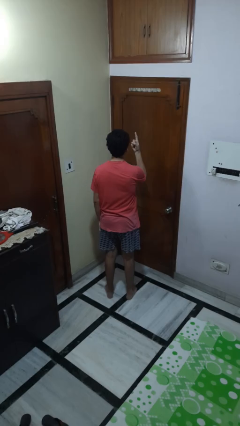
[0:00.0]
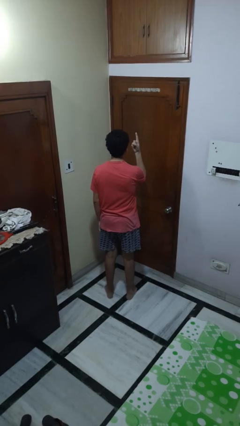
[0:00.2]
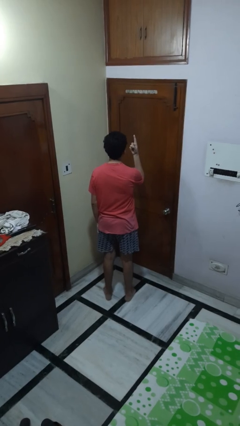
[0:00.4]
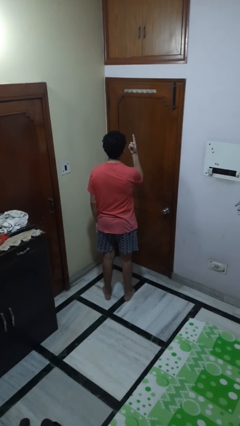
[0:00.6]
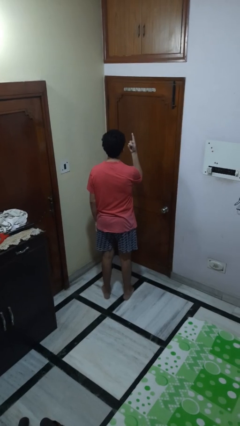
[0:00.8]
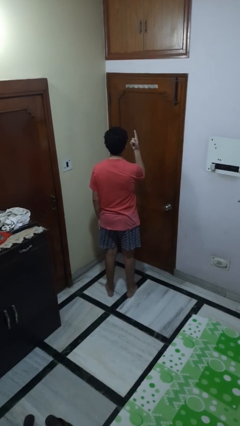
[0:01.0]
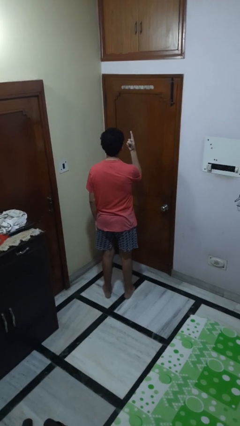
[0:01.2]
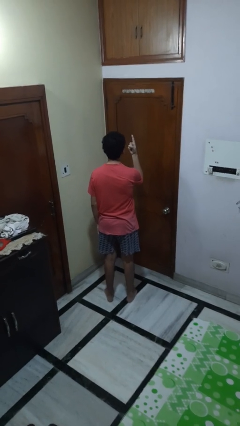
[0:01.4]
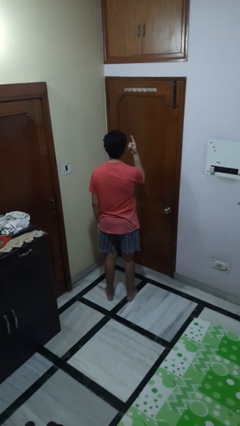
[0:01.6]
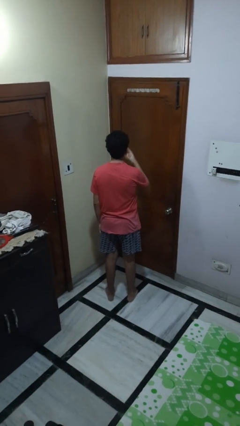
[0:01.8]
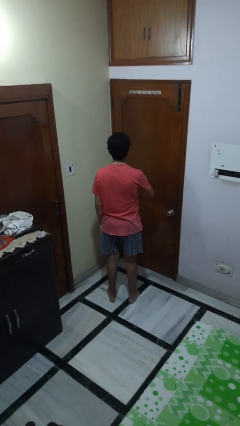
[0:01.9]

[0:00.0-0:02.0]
person gestures number one

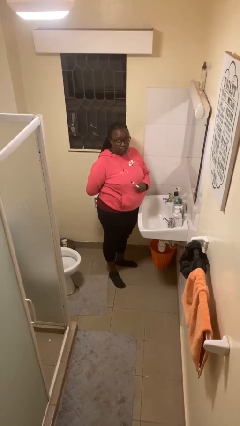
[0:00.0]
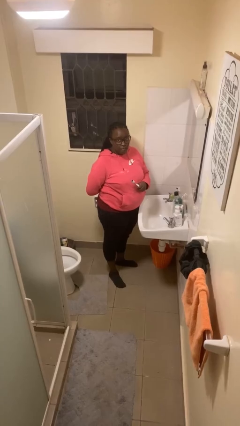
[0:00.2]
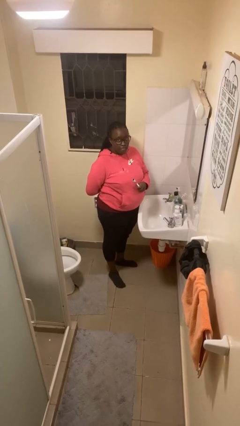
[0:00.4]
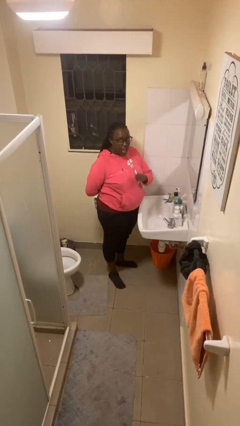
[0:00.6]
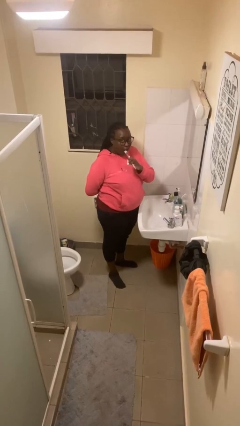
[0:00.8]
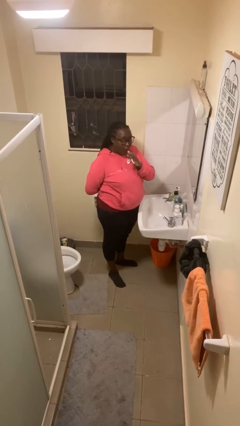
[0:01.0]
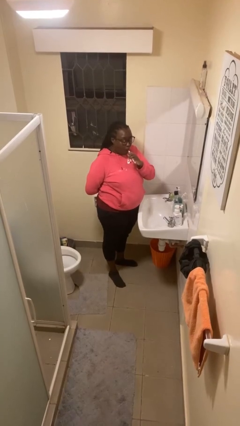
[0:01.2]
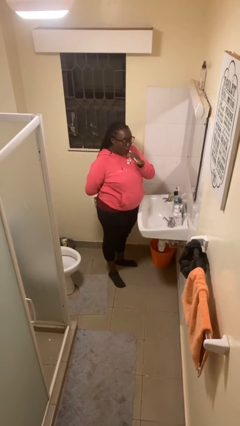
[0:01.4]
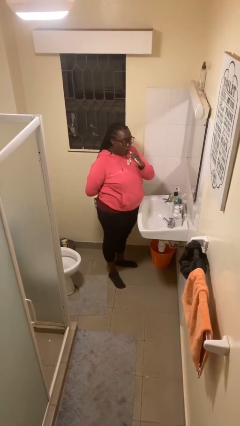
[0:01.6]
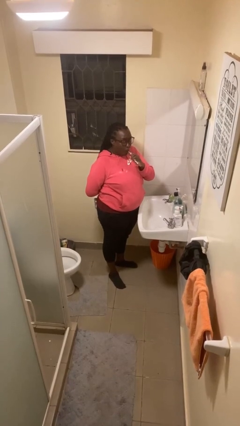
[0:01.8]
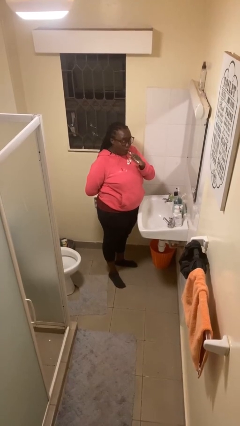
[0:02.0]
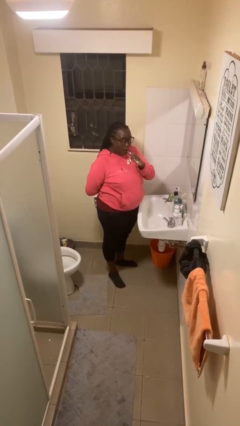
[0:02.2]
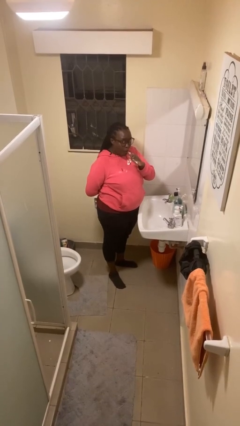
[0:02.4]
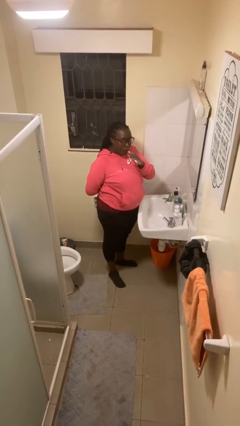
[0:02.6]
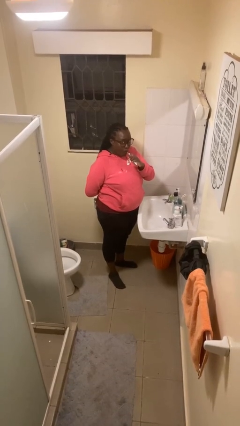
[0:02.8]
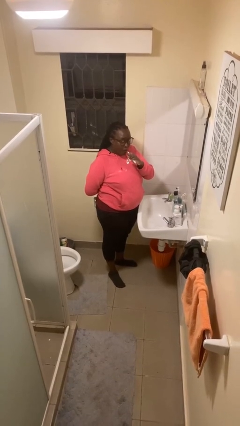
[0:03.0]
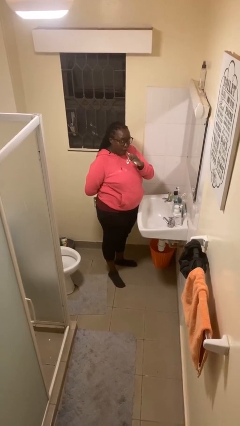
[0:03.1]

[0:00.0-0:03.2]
person brushes teeth

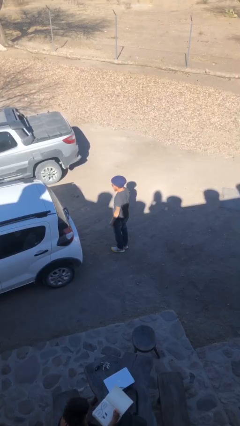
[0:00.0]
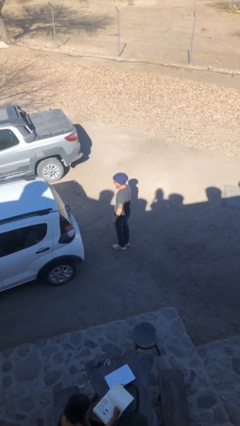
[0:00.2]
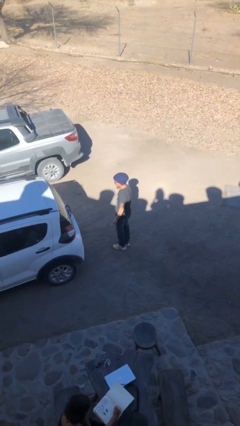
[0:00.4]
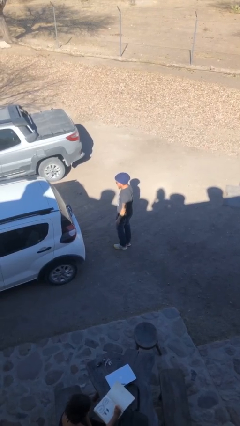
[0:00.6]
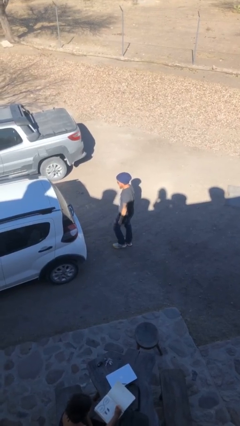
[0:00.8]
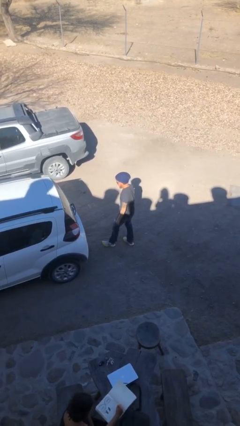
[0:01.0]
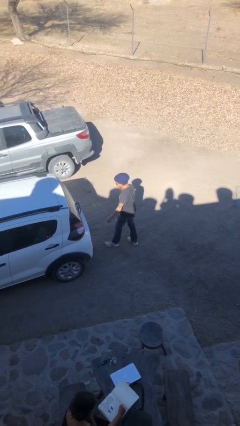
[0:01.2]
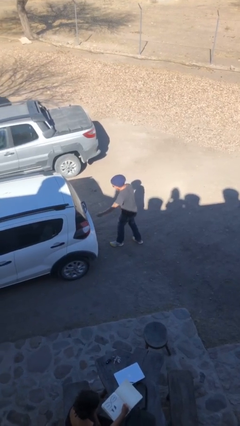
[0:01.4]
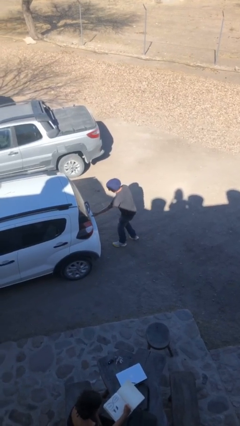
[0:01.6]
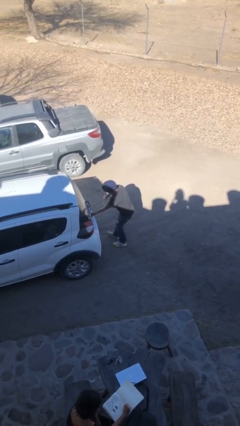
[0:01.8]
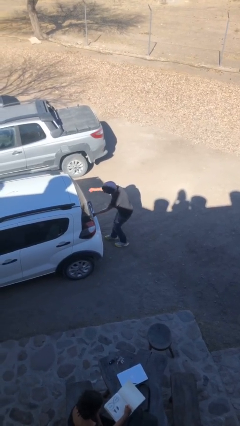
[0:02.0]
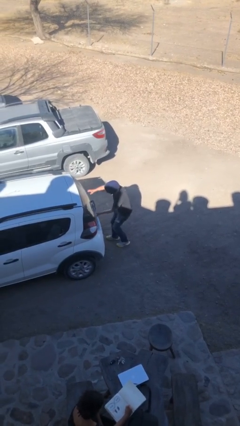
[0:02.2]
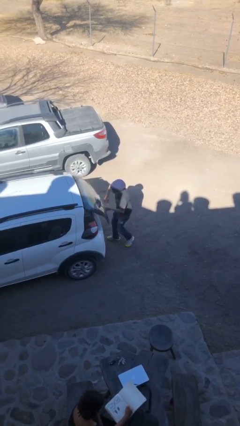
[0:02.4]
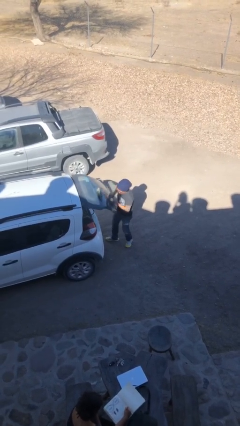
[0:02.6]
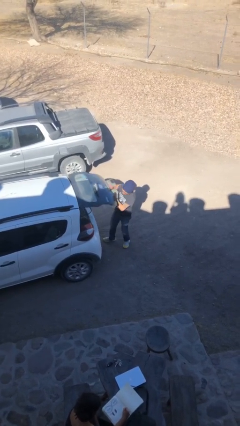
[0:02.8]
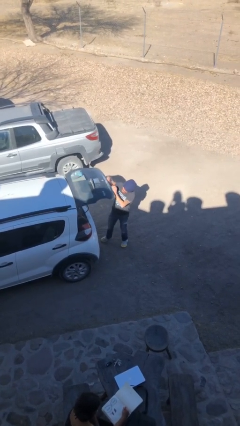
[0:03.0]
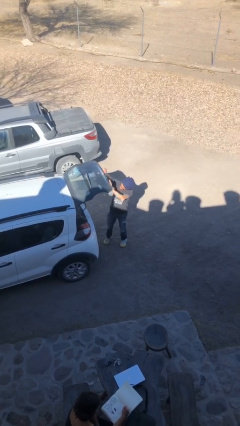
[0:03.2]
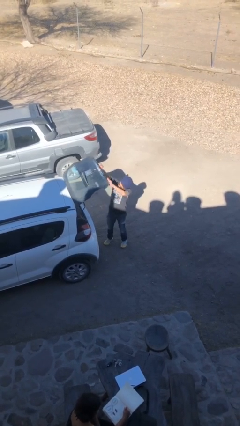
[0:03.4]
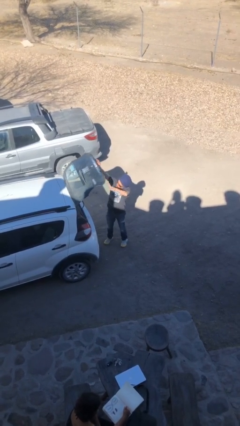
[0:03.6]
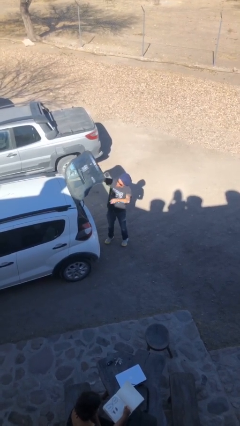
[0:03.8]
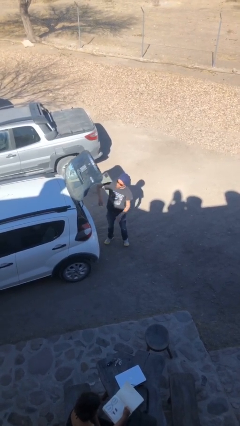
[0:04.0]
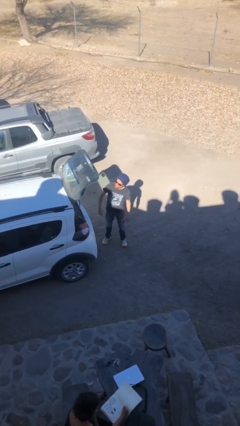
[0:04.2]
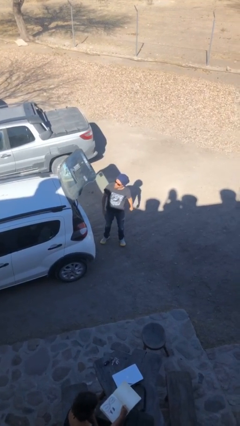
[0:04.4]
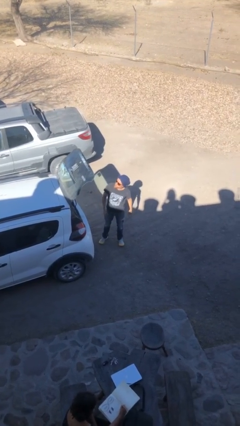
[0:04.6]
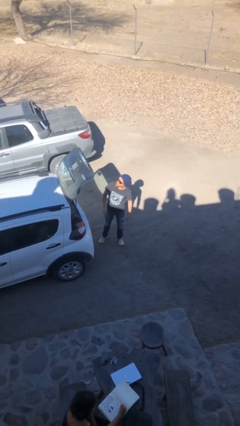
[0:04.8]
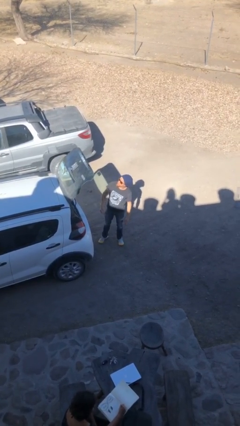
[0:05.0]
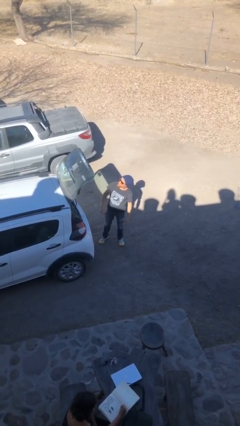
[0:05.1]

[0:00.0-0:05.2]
person opens car trunk

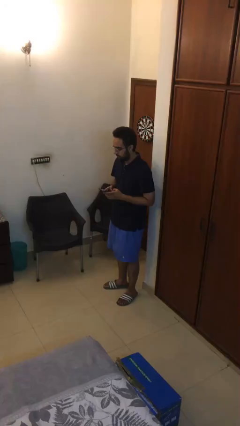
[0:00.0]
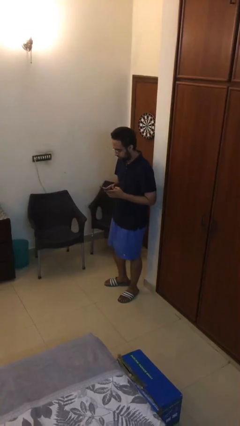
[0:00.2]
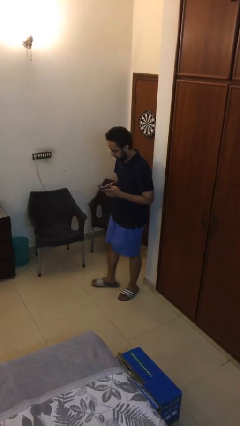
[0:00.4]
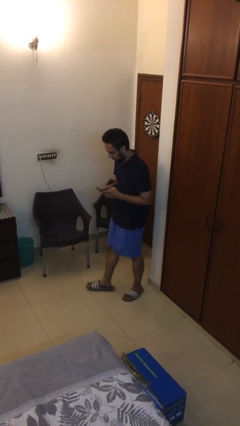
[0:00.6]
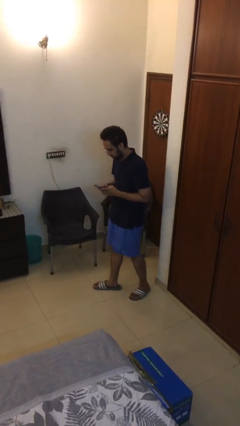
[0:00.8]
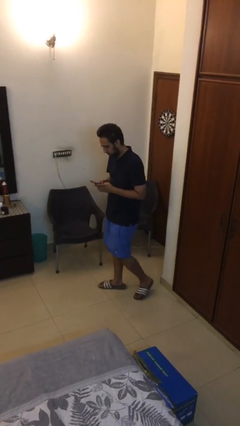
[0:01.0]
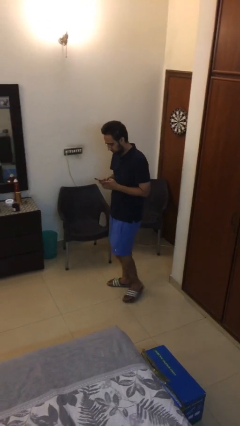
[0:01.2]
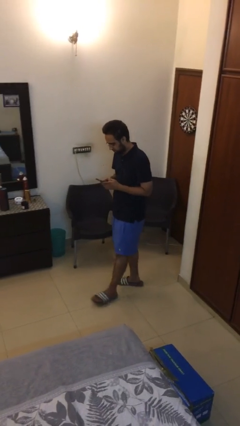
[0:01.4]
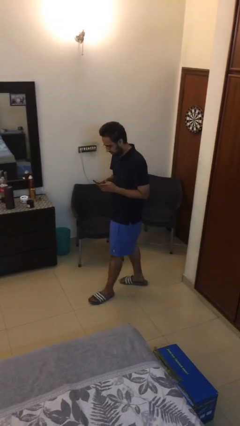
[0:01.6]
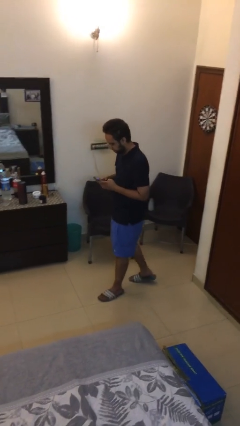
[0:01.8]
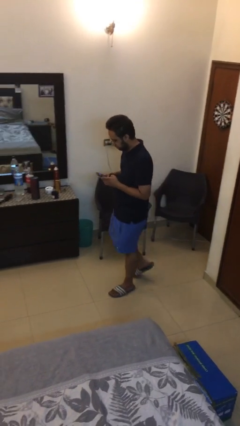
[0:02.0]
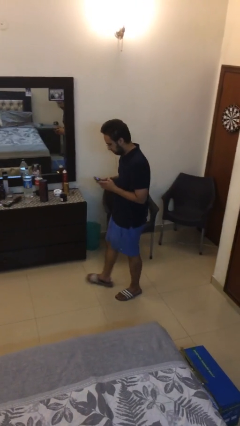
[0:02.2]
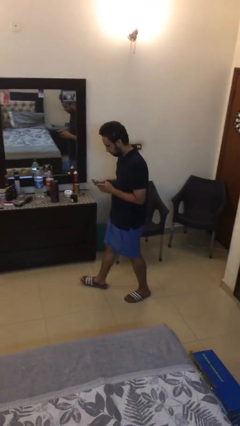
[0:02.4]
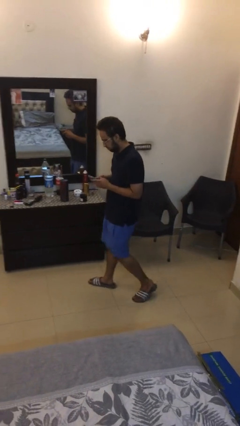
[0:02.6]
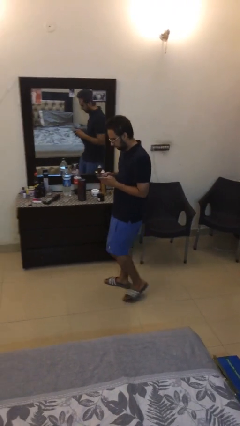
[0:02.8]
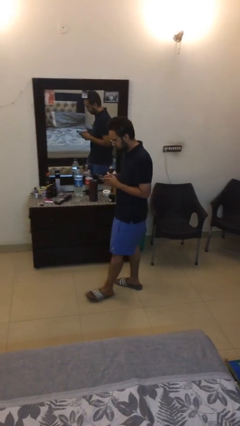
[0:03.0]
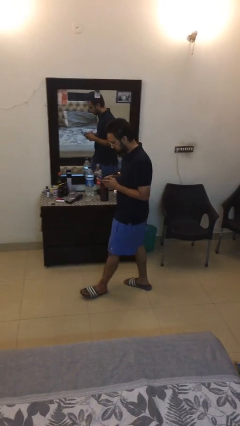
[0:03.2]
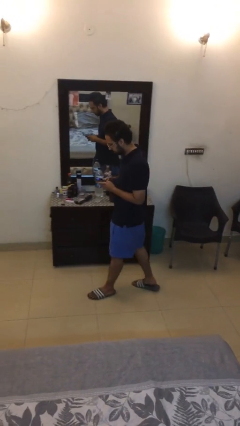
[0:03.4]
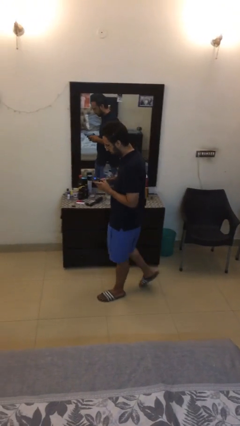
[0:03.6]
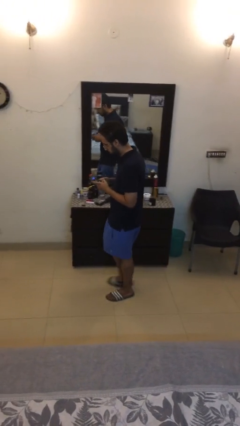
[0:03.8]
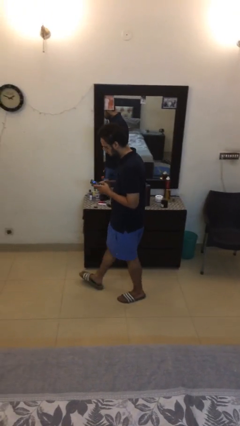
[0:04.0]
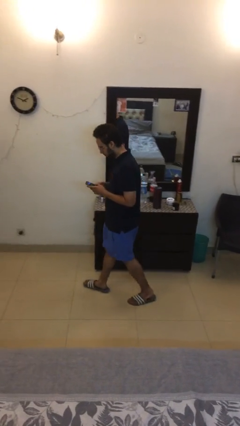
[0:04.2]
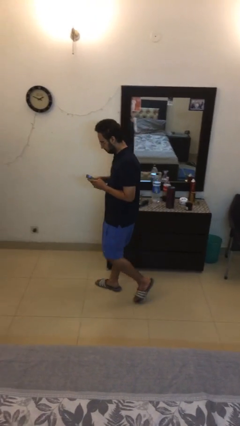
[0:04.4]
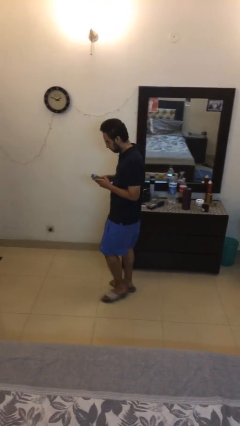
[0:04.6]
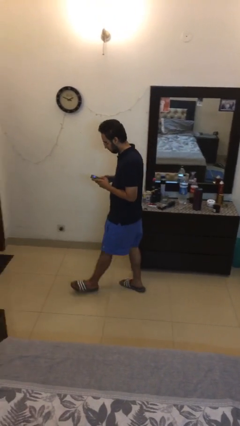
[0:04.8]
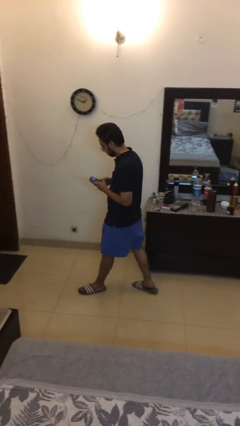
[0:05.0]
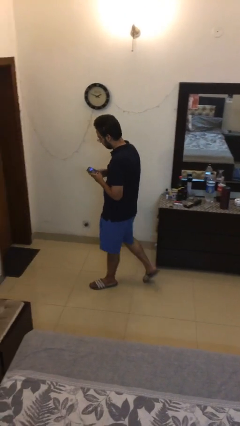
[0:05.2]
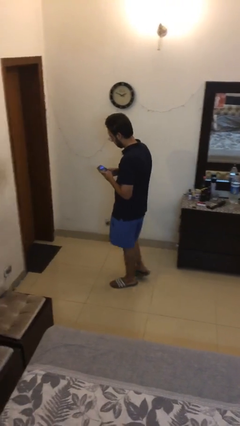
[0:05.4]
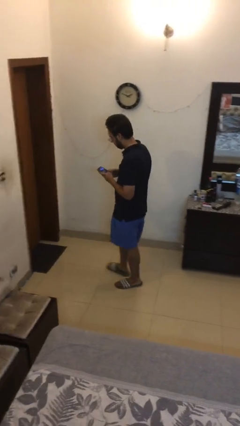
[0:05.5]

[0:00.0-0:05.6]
person texts on phone

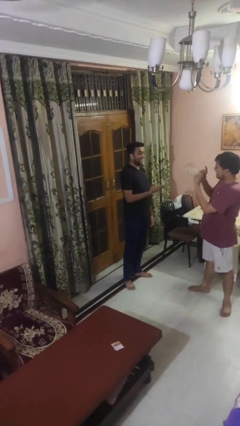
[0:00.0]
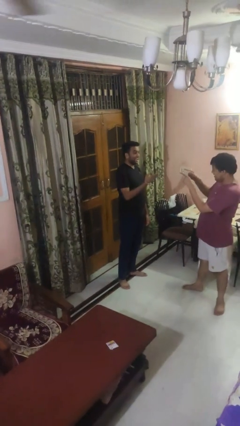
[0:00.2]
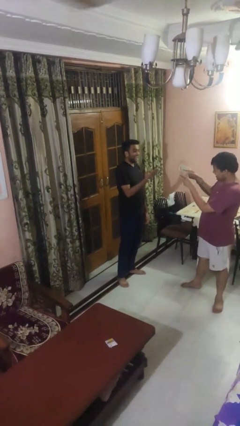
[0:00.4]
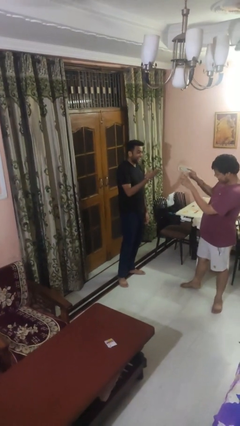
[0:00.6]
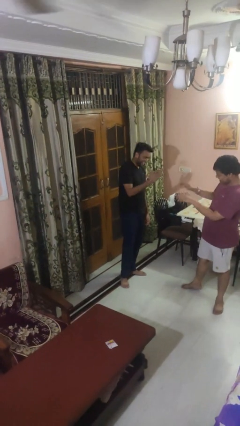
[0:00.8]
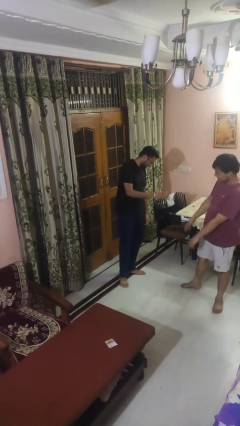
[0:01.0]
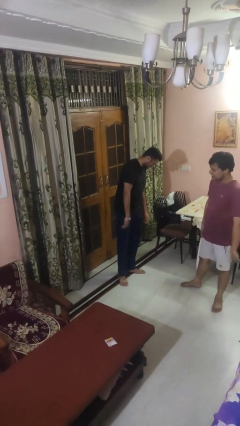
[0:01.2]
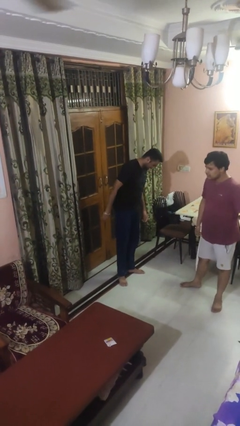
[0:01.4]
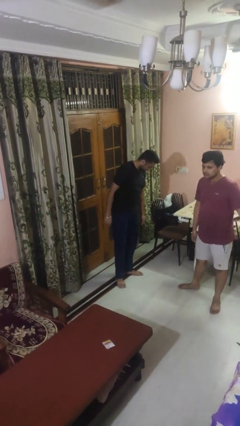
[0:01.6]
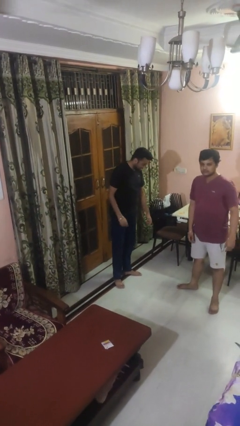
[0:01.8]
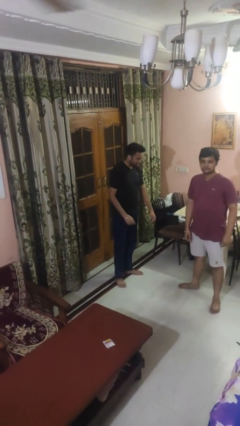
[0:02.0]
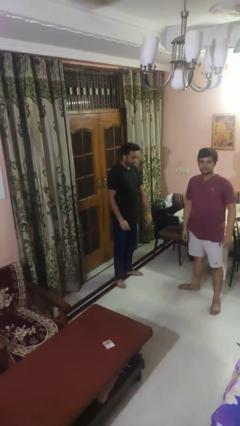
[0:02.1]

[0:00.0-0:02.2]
person laughs with person
